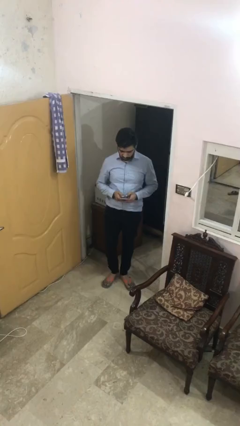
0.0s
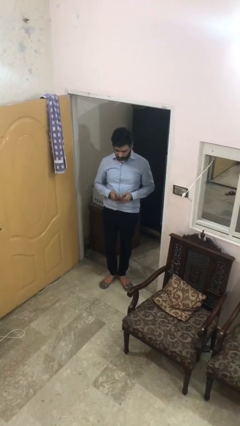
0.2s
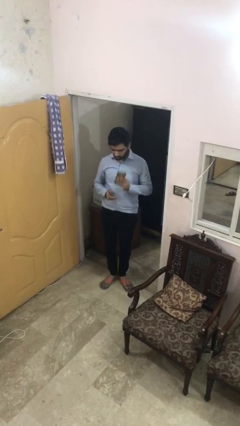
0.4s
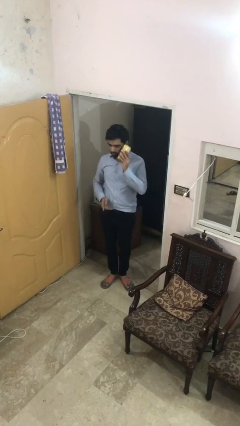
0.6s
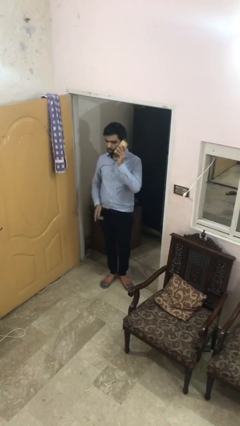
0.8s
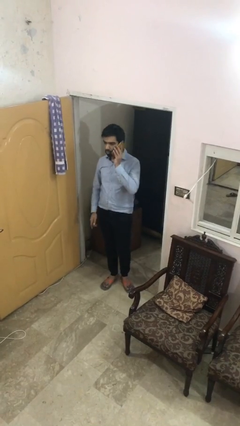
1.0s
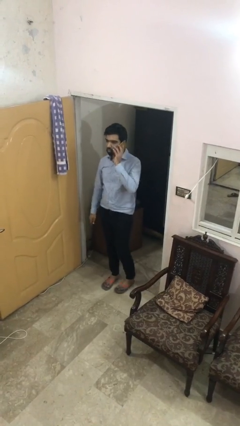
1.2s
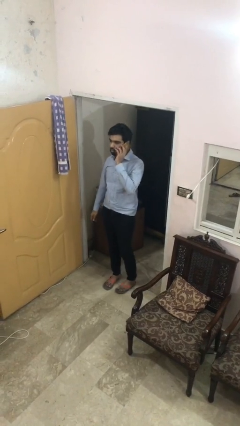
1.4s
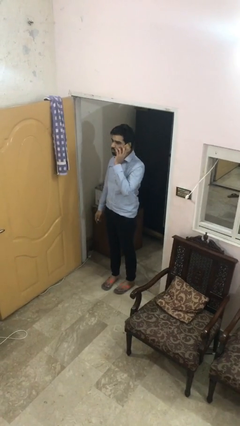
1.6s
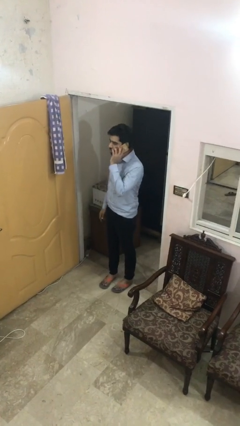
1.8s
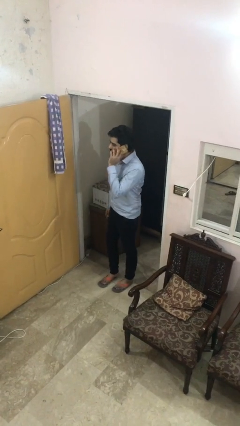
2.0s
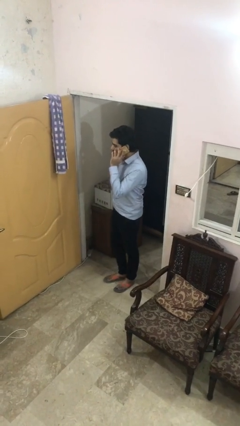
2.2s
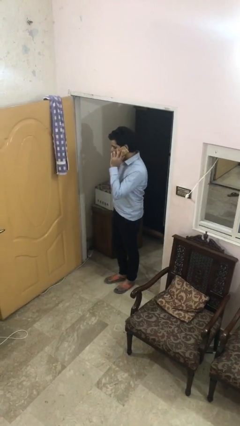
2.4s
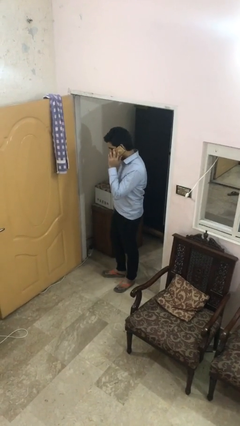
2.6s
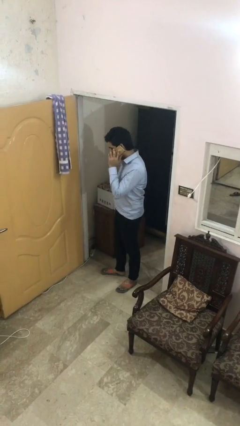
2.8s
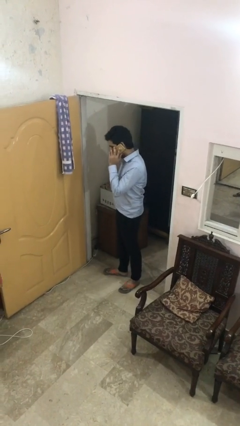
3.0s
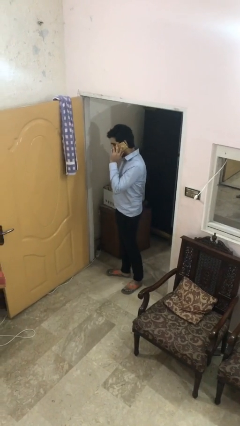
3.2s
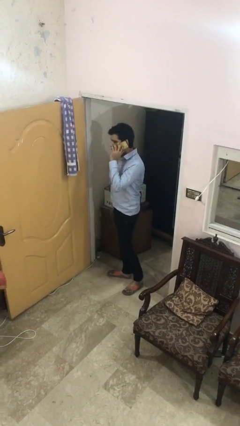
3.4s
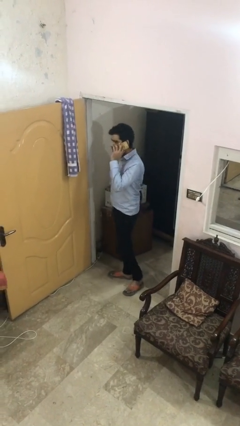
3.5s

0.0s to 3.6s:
person talks on phone

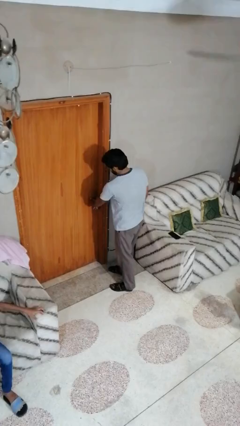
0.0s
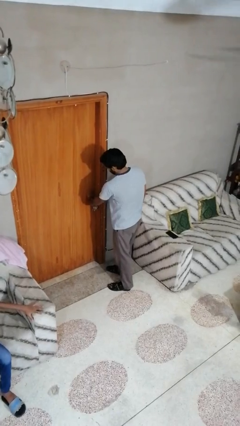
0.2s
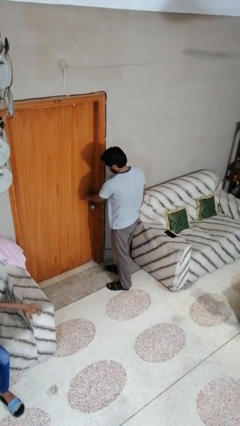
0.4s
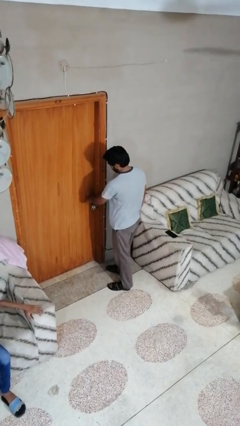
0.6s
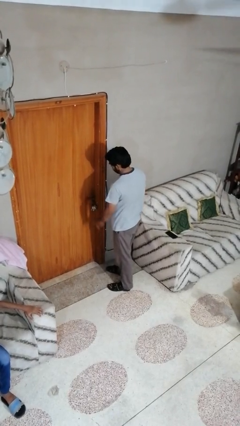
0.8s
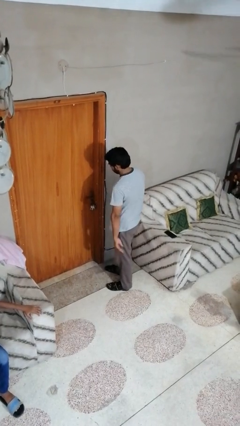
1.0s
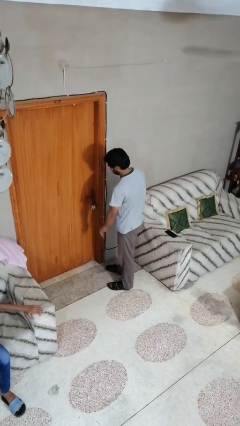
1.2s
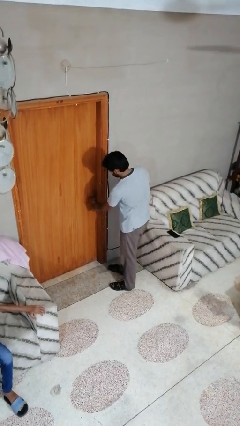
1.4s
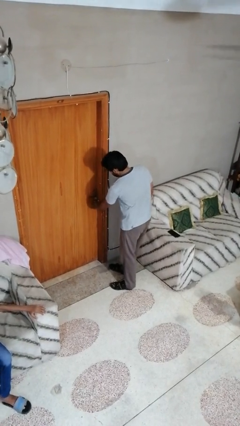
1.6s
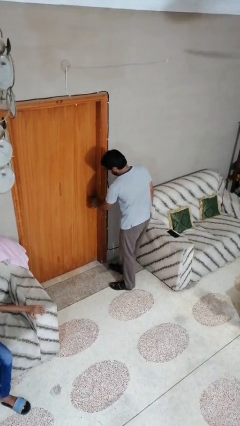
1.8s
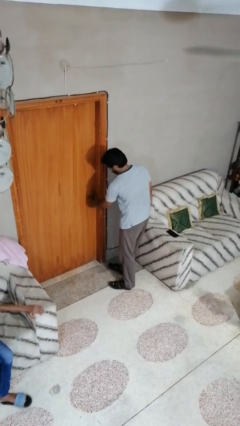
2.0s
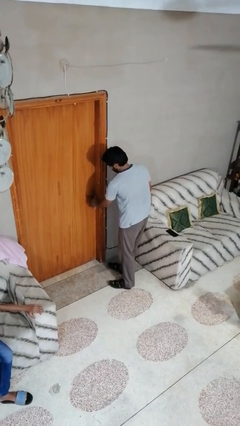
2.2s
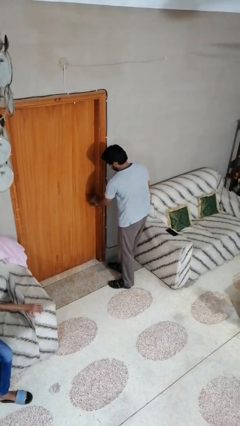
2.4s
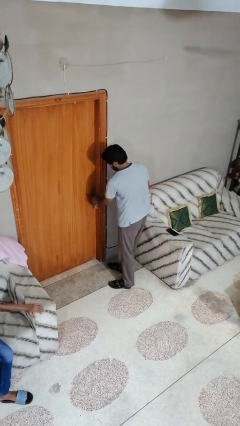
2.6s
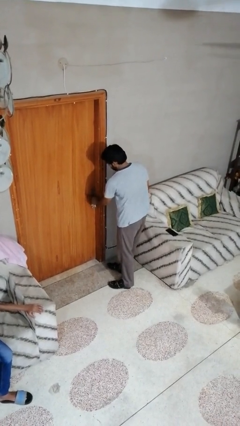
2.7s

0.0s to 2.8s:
person locks door with keys

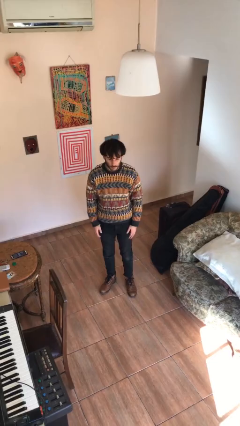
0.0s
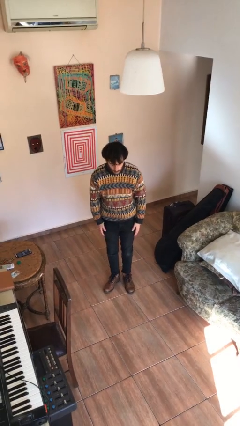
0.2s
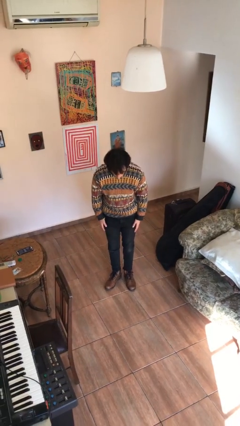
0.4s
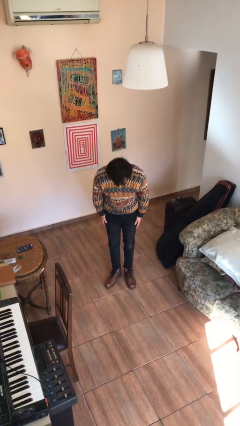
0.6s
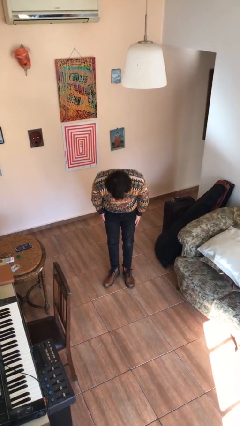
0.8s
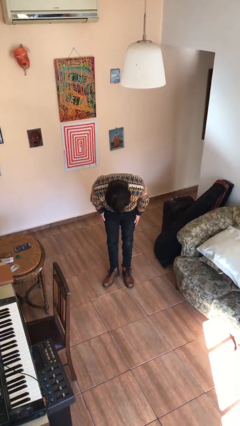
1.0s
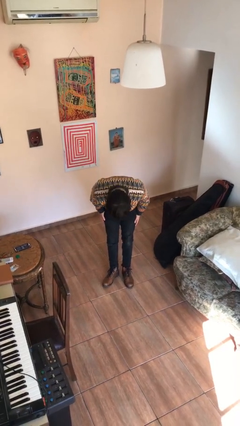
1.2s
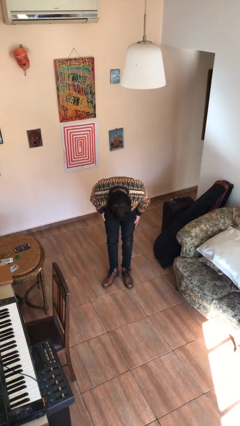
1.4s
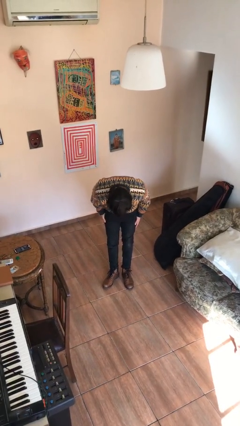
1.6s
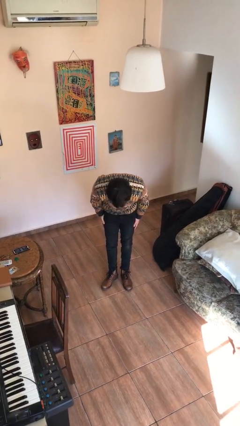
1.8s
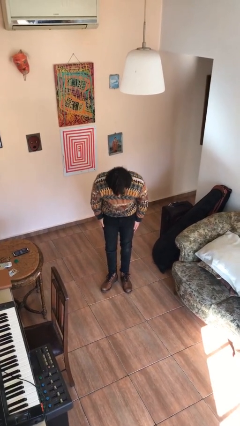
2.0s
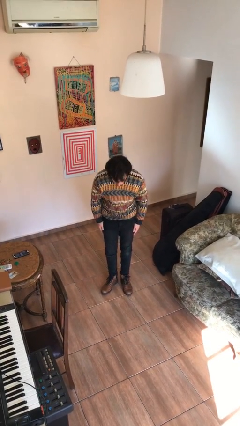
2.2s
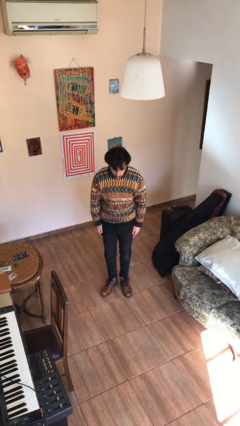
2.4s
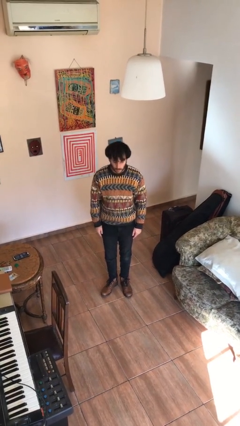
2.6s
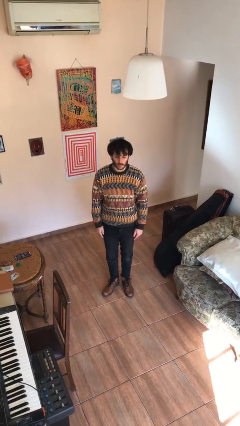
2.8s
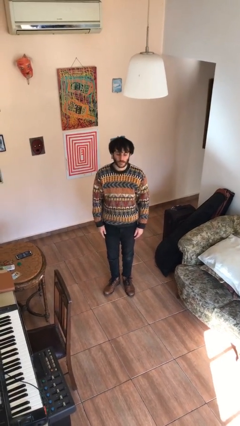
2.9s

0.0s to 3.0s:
person bows

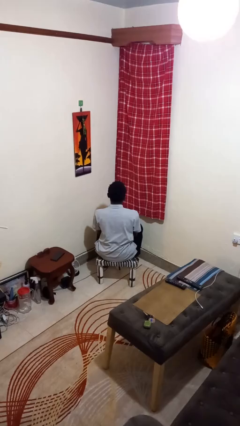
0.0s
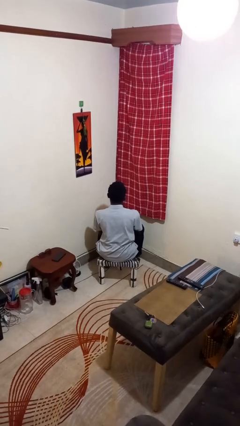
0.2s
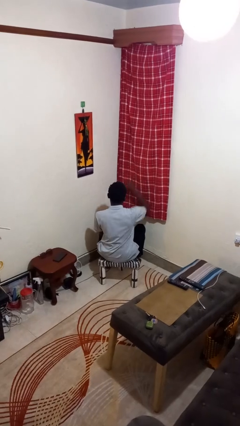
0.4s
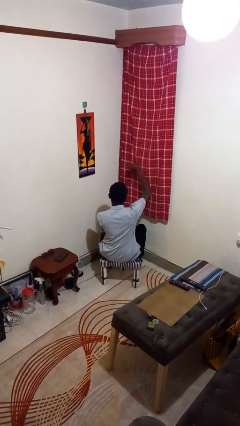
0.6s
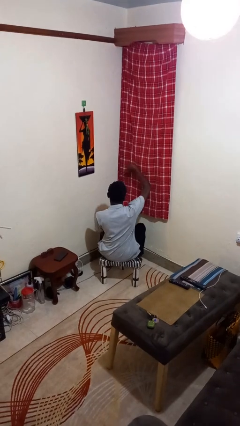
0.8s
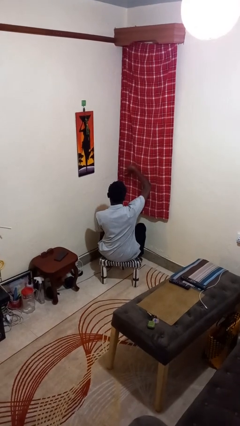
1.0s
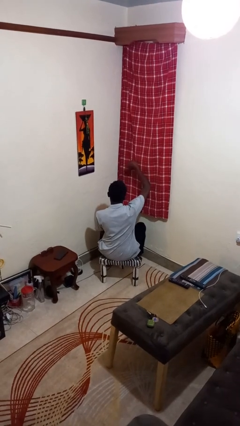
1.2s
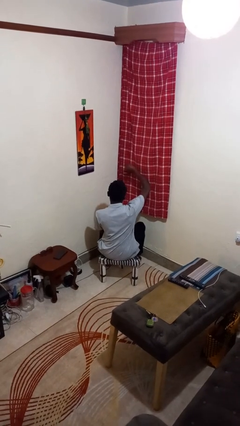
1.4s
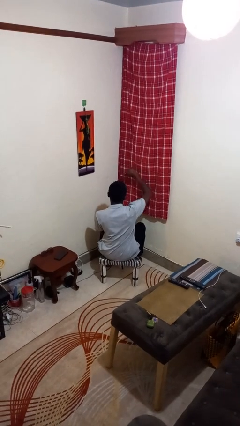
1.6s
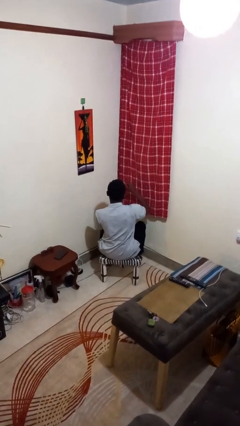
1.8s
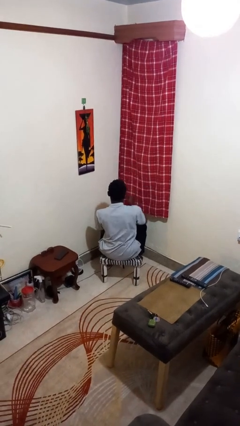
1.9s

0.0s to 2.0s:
person gestures thumbs down

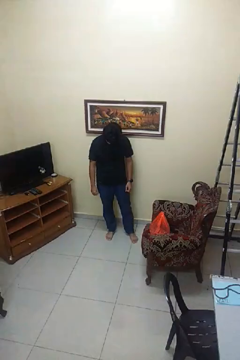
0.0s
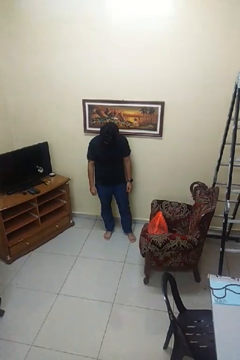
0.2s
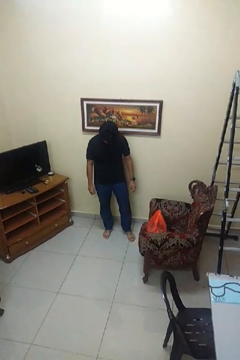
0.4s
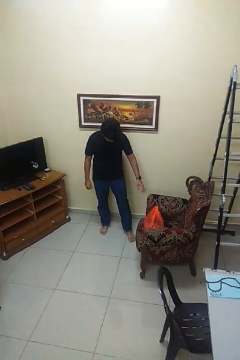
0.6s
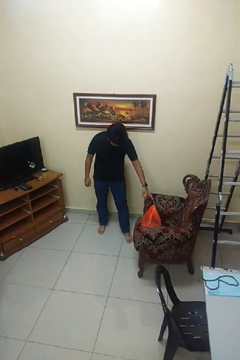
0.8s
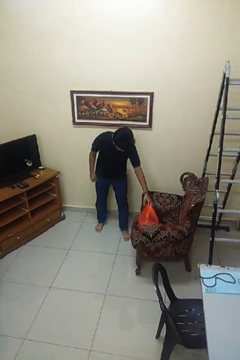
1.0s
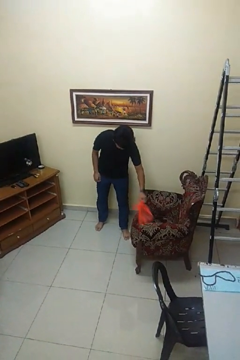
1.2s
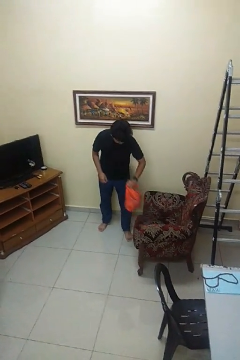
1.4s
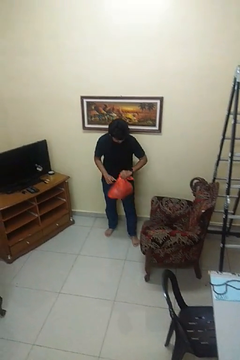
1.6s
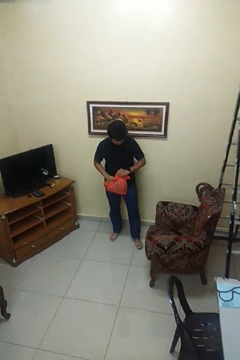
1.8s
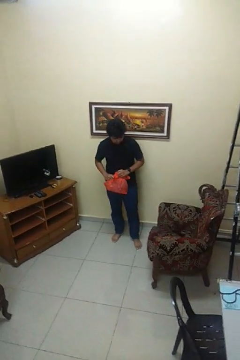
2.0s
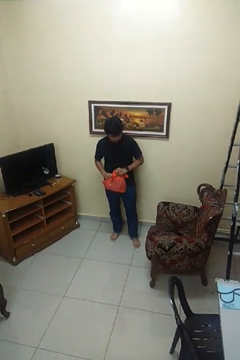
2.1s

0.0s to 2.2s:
person picks up object from couch

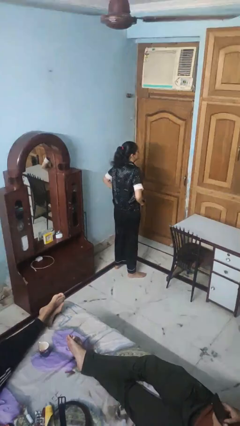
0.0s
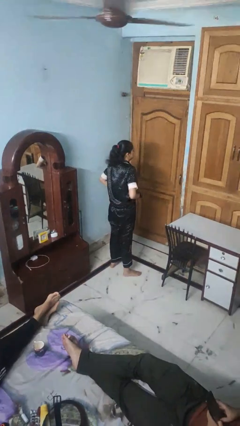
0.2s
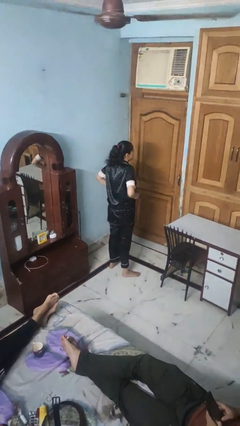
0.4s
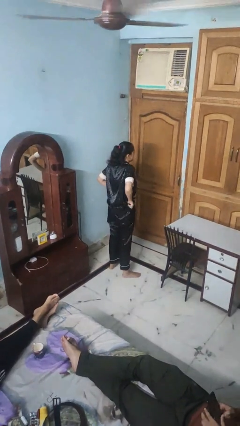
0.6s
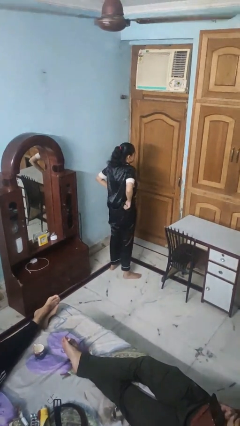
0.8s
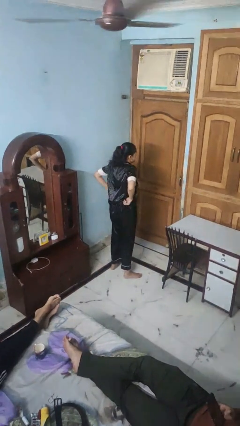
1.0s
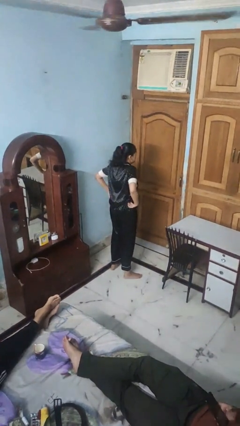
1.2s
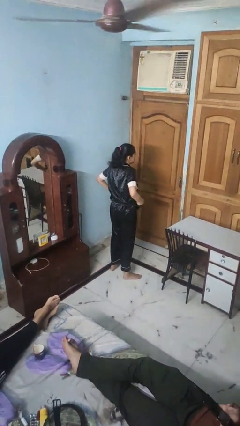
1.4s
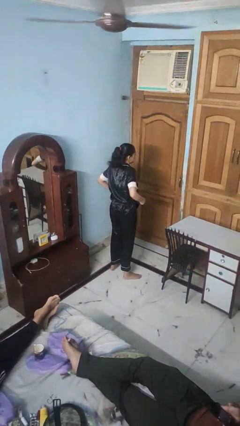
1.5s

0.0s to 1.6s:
person hikes up pants

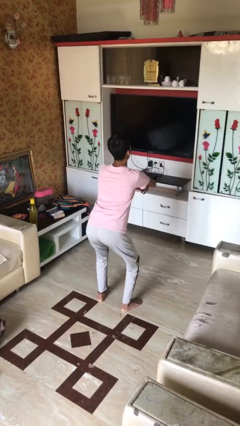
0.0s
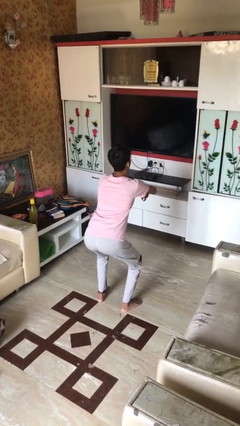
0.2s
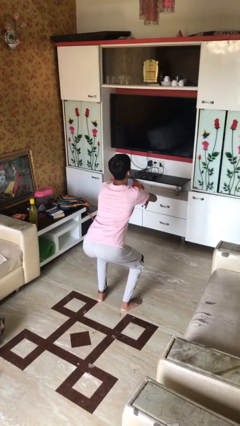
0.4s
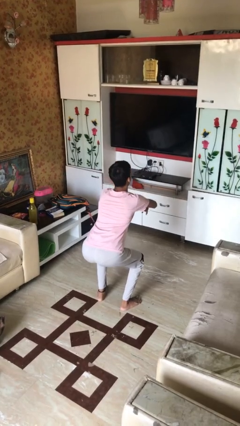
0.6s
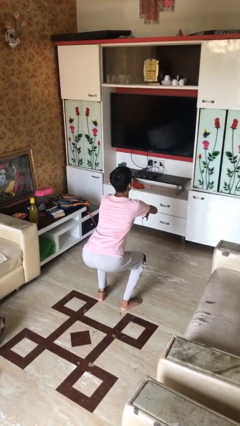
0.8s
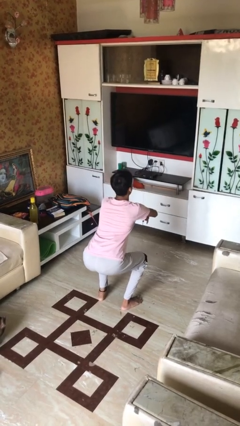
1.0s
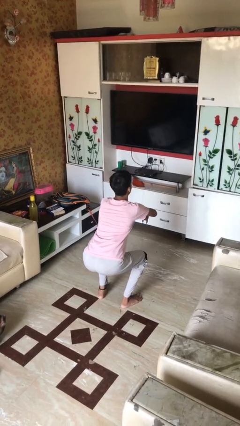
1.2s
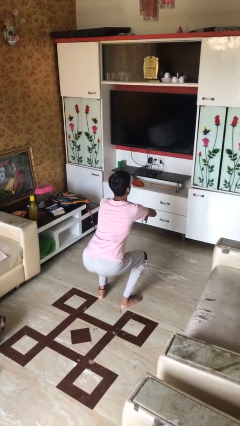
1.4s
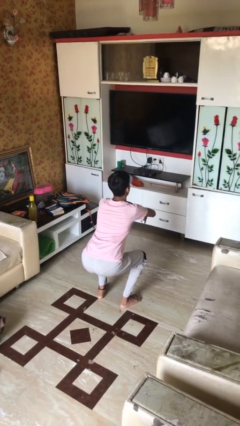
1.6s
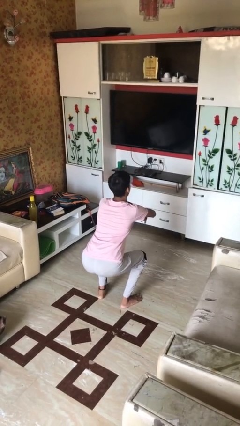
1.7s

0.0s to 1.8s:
person squats

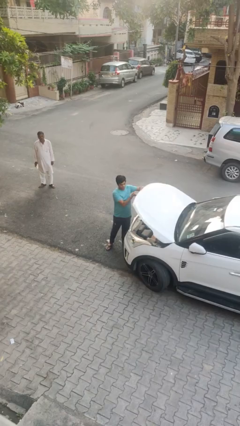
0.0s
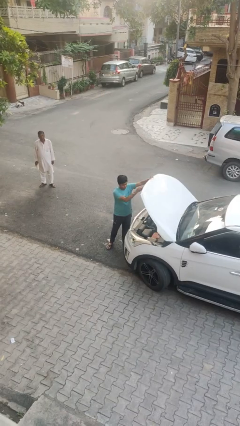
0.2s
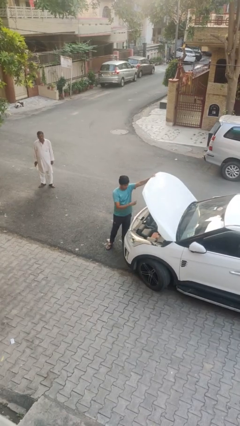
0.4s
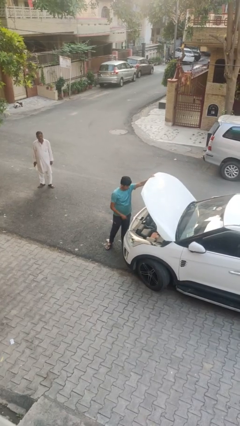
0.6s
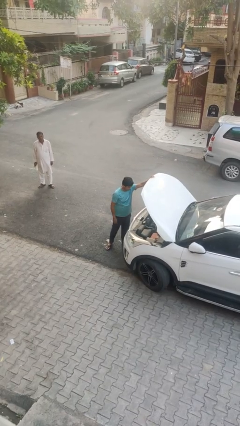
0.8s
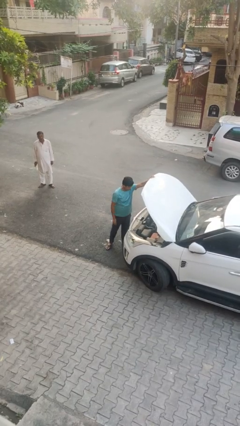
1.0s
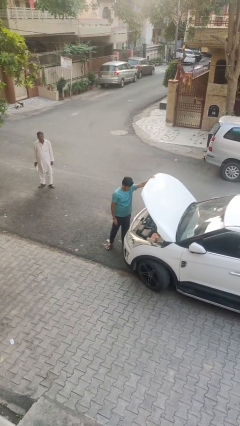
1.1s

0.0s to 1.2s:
person opens car hood
